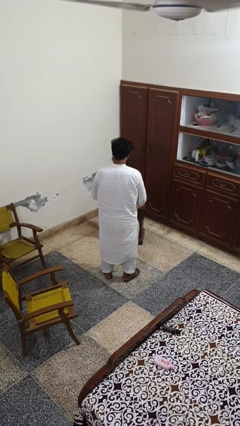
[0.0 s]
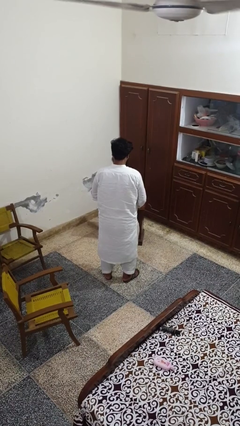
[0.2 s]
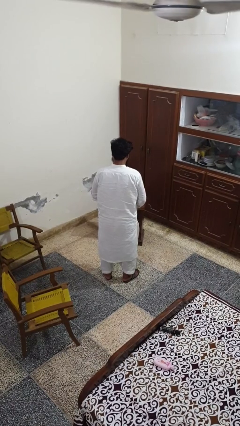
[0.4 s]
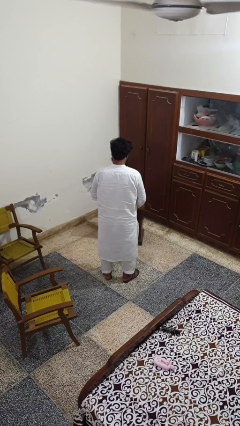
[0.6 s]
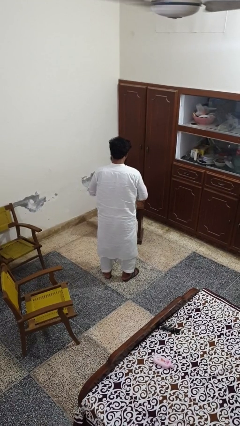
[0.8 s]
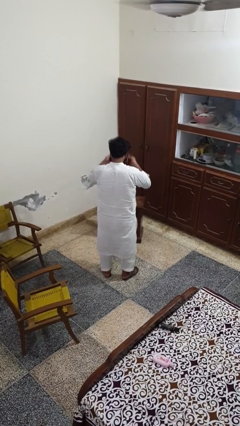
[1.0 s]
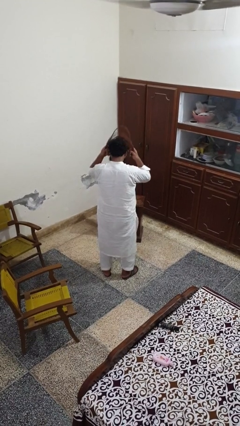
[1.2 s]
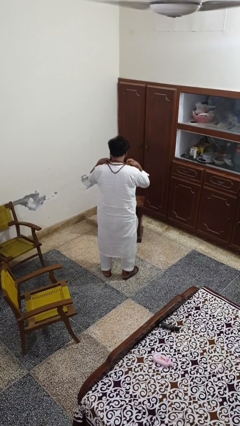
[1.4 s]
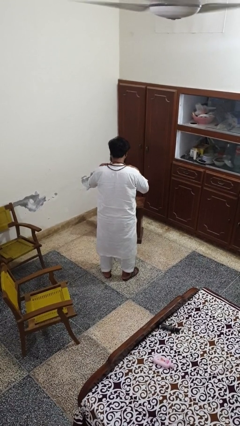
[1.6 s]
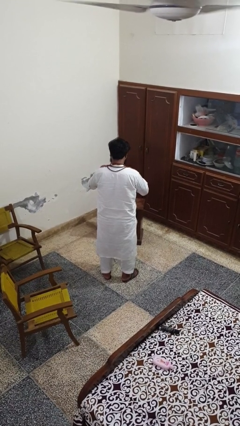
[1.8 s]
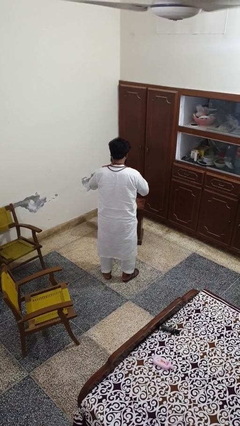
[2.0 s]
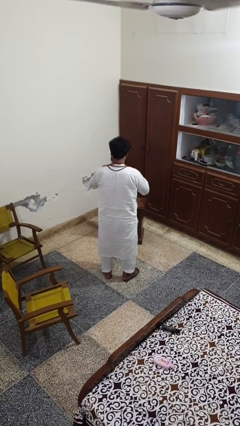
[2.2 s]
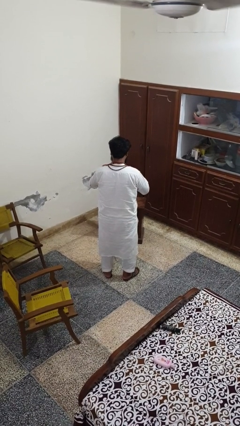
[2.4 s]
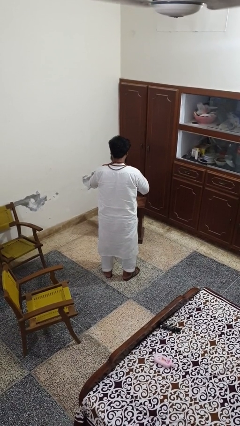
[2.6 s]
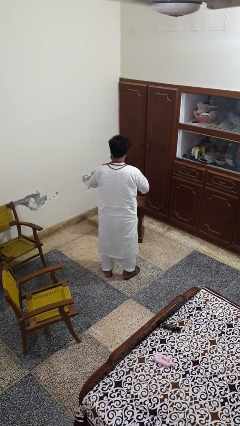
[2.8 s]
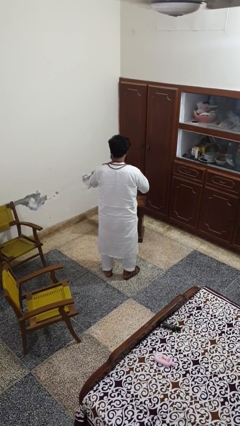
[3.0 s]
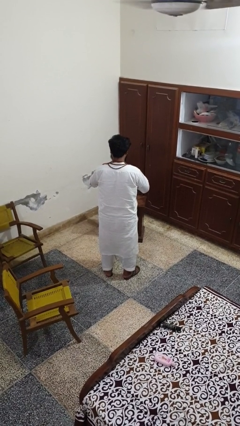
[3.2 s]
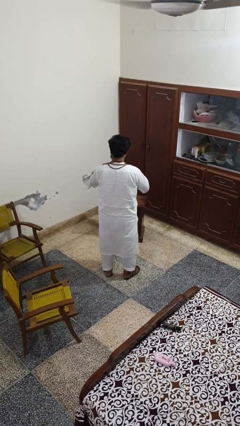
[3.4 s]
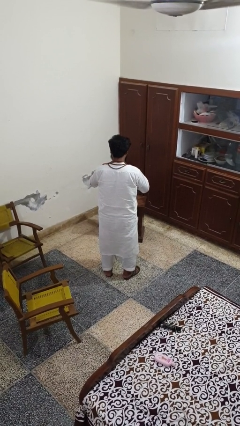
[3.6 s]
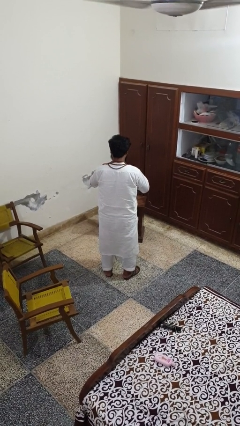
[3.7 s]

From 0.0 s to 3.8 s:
person puts on necklace

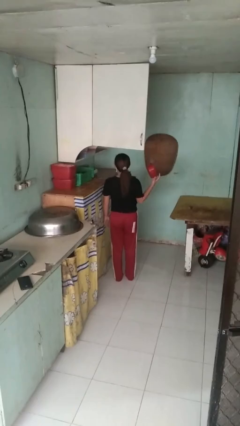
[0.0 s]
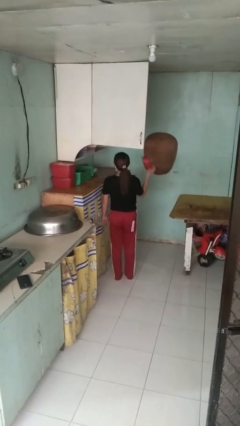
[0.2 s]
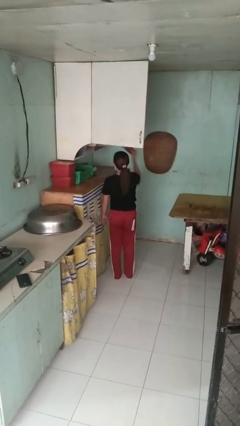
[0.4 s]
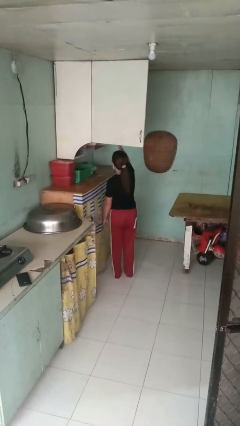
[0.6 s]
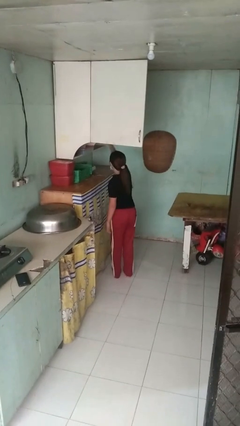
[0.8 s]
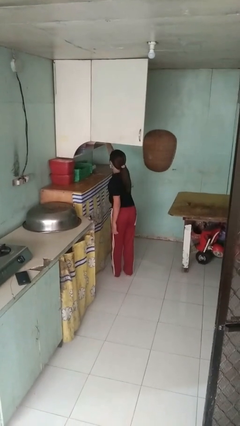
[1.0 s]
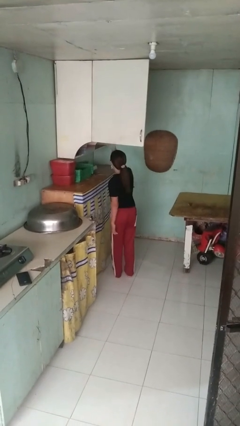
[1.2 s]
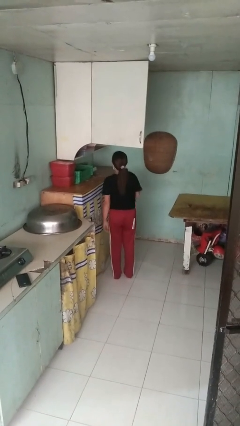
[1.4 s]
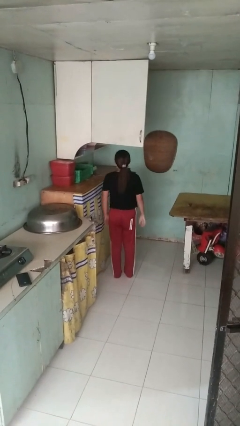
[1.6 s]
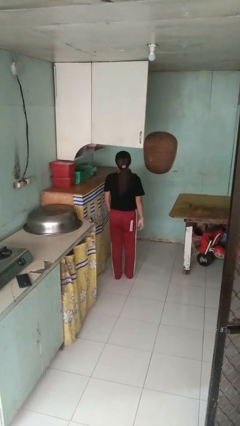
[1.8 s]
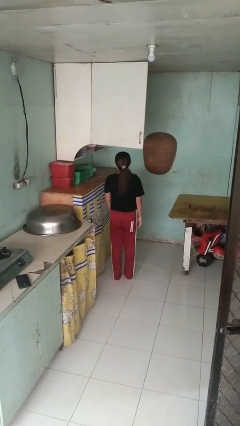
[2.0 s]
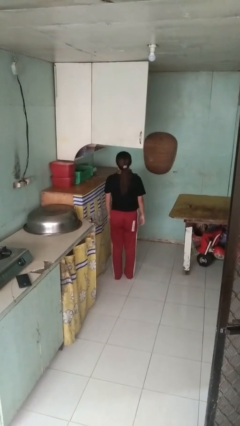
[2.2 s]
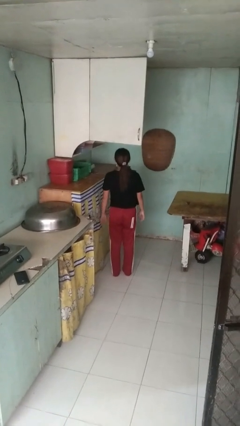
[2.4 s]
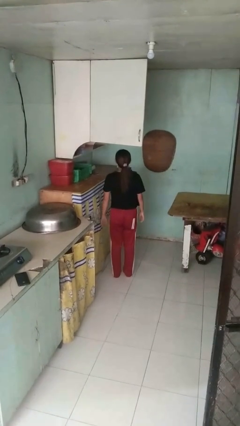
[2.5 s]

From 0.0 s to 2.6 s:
person puts object in cabinet

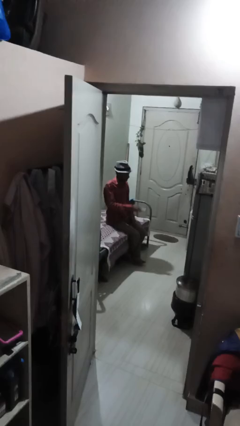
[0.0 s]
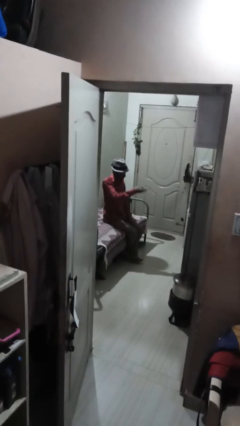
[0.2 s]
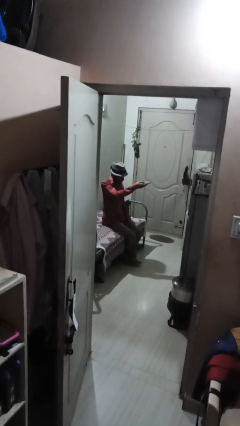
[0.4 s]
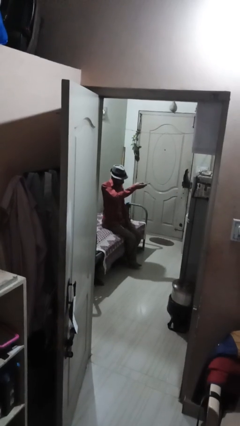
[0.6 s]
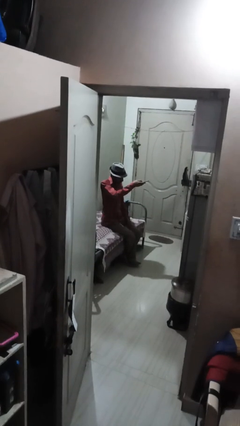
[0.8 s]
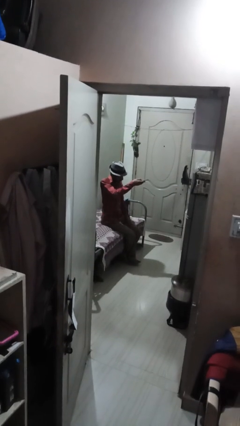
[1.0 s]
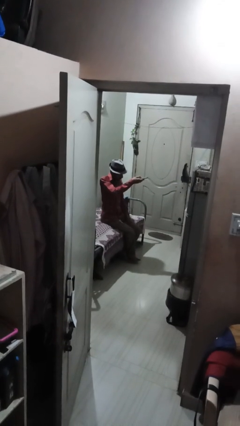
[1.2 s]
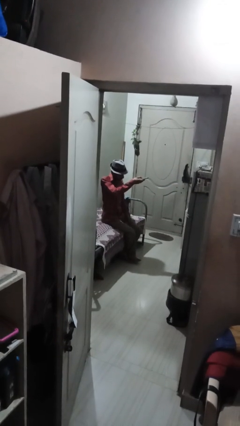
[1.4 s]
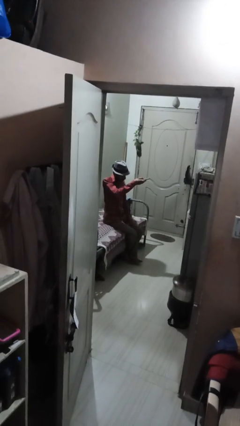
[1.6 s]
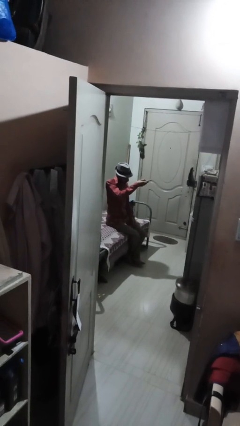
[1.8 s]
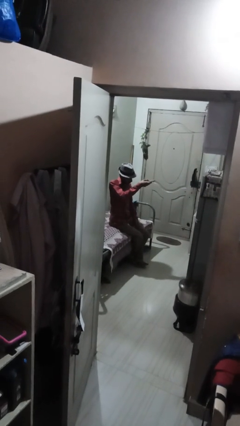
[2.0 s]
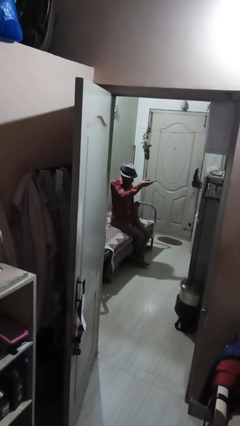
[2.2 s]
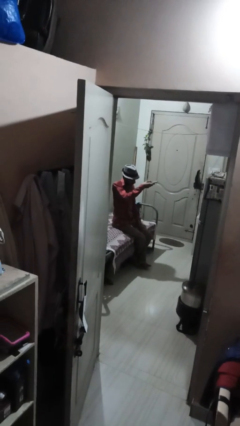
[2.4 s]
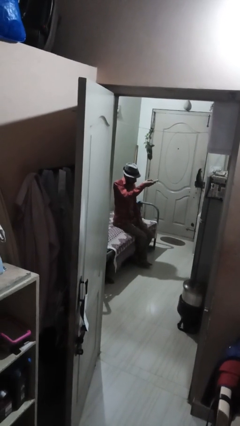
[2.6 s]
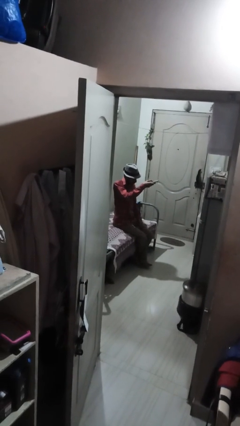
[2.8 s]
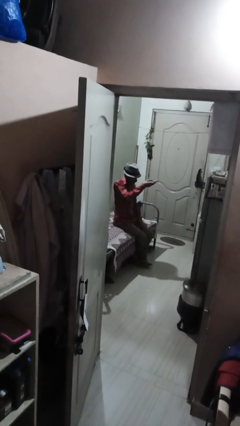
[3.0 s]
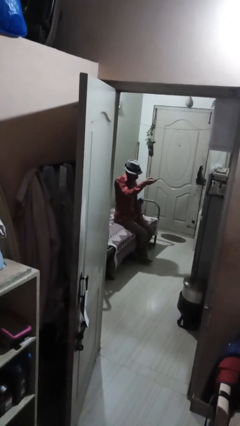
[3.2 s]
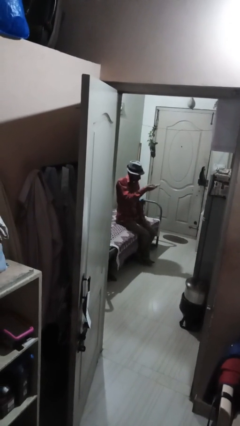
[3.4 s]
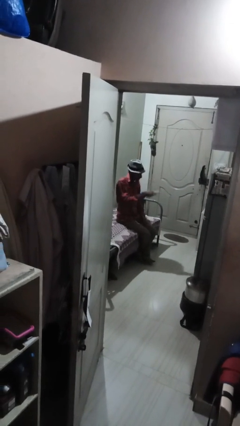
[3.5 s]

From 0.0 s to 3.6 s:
person uses television remote

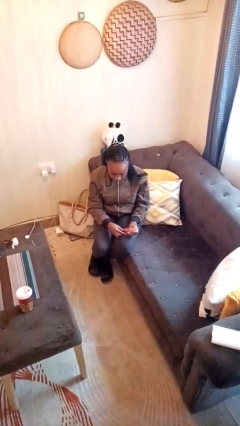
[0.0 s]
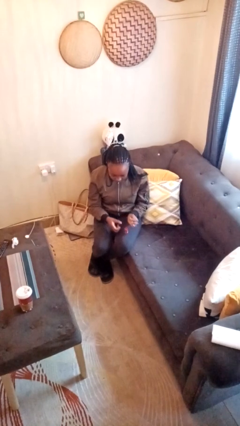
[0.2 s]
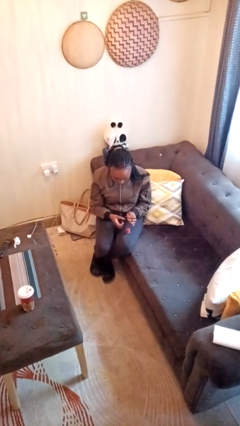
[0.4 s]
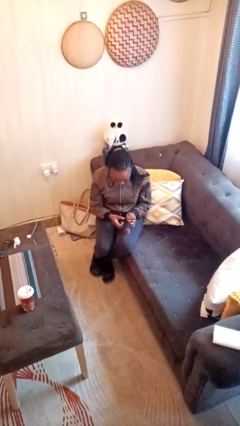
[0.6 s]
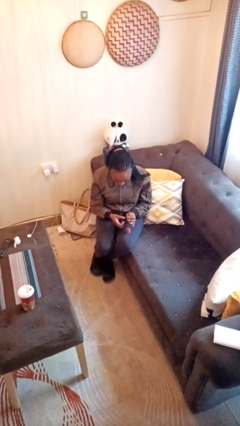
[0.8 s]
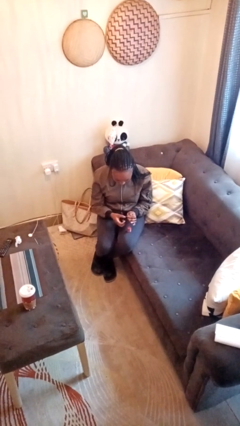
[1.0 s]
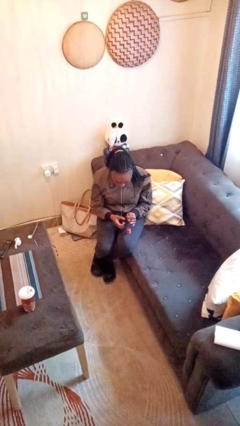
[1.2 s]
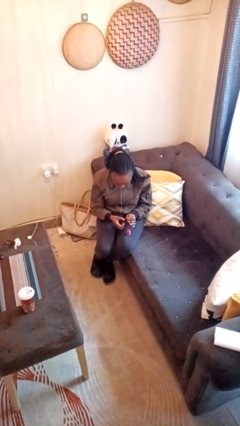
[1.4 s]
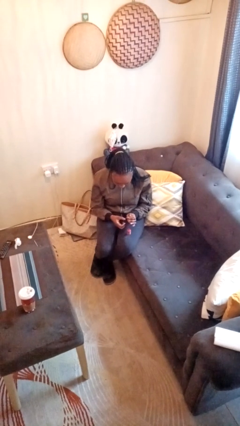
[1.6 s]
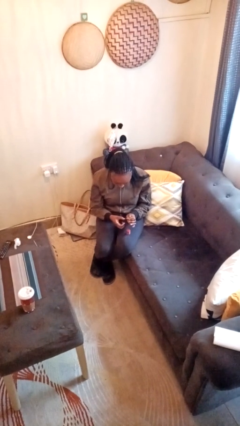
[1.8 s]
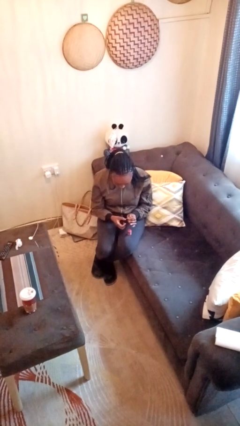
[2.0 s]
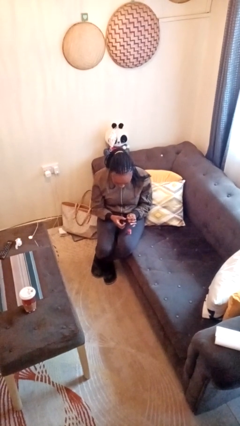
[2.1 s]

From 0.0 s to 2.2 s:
person paints fingernails

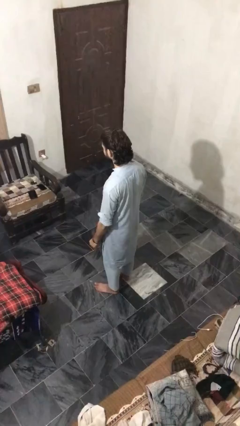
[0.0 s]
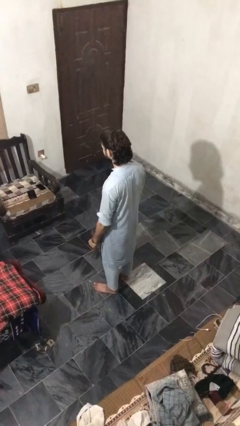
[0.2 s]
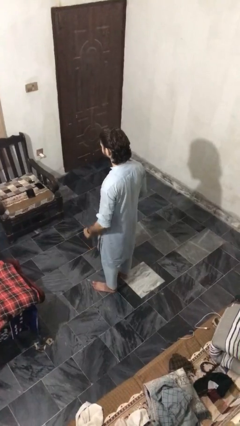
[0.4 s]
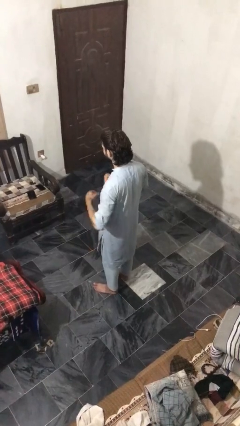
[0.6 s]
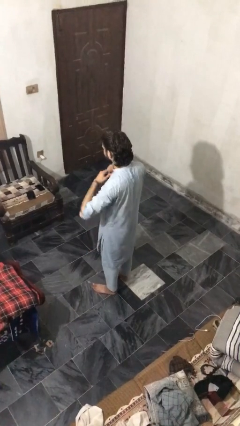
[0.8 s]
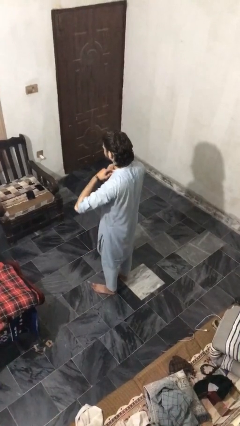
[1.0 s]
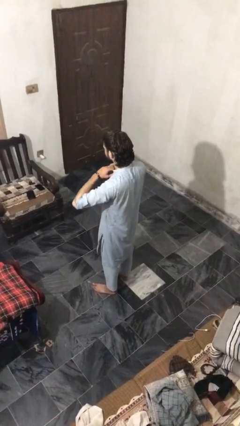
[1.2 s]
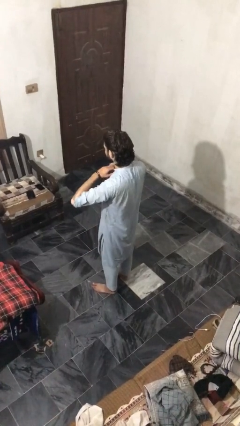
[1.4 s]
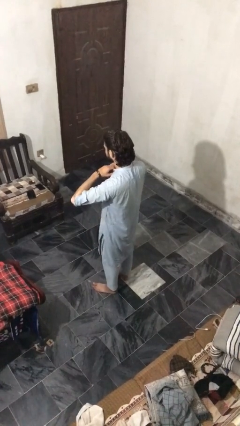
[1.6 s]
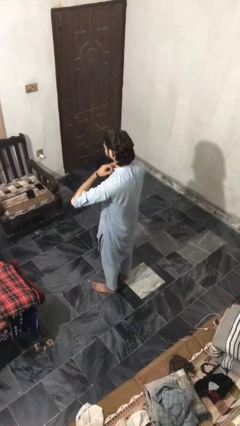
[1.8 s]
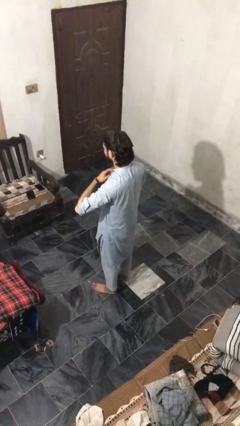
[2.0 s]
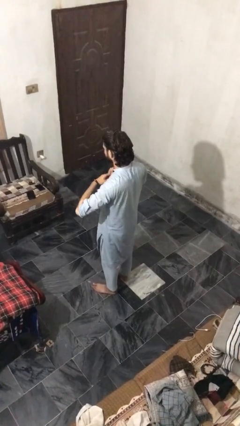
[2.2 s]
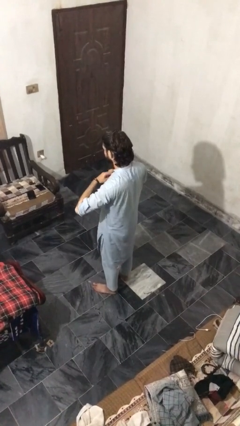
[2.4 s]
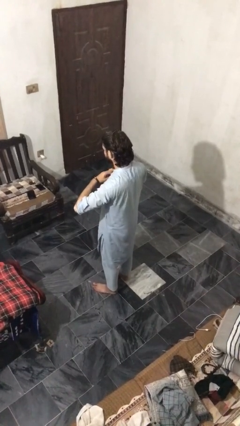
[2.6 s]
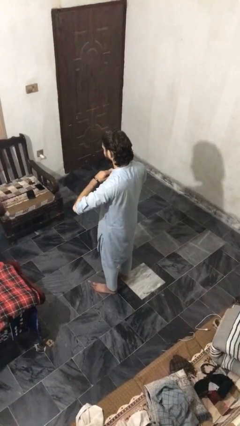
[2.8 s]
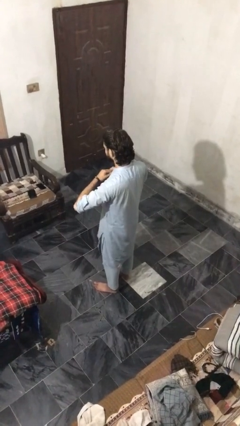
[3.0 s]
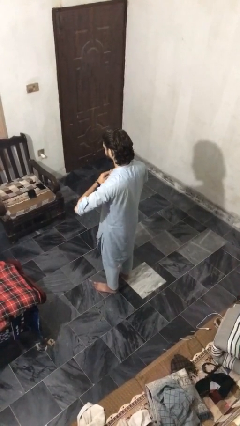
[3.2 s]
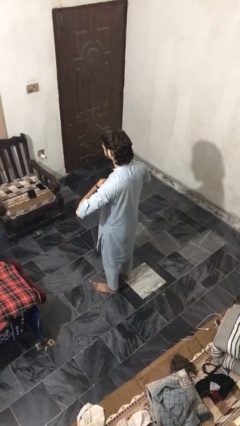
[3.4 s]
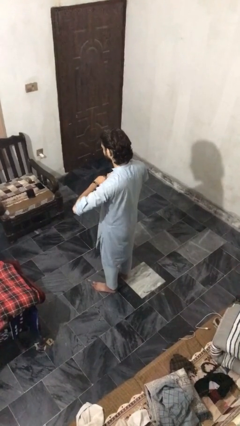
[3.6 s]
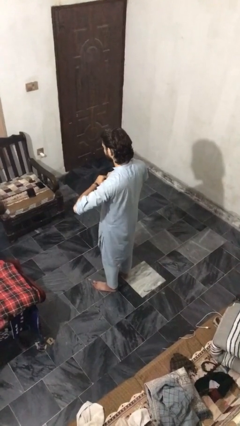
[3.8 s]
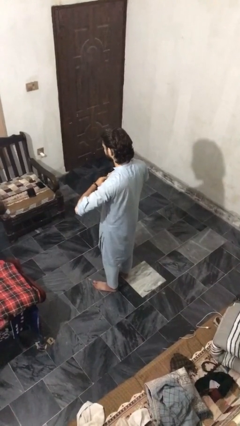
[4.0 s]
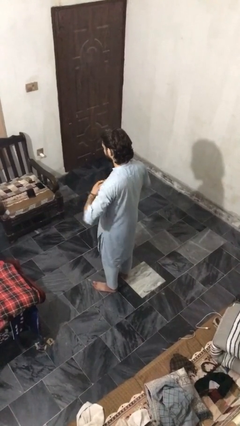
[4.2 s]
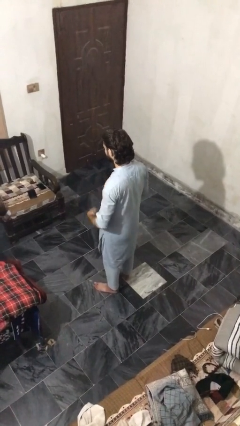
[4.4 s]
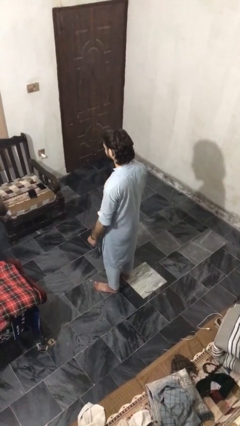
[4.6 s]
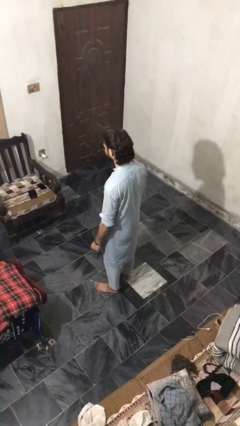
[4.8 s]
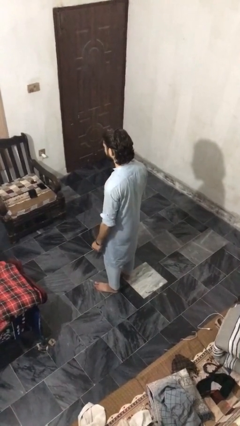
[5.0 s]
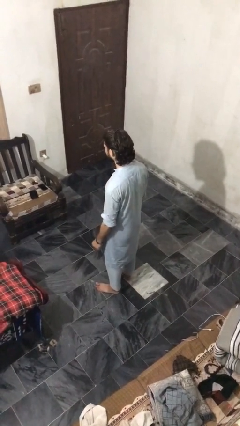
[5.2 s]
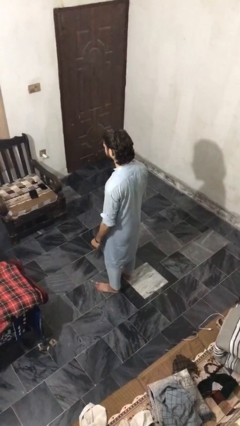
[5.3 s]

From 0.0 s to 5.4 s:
person unbuttons shirt
